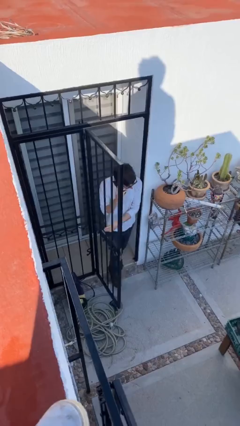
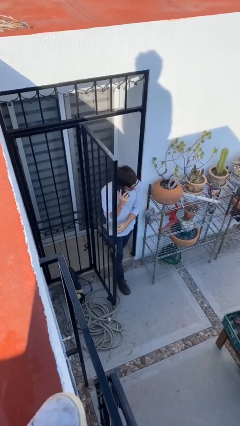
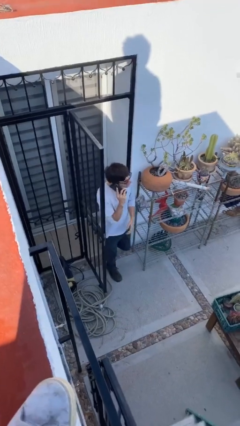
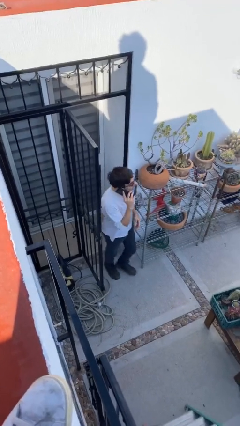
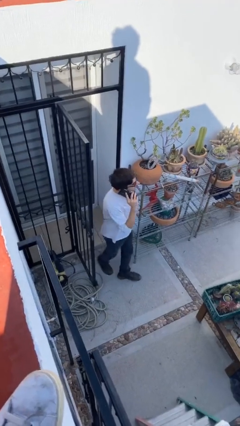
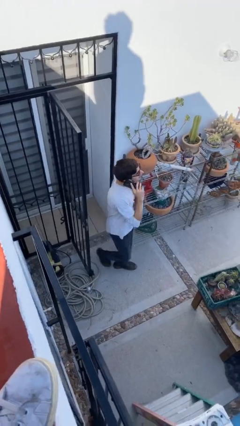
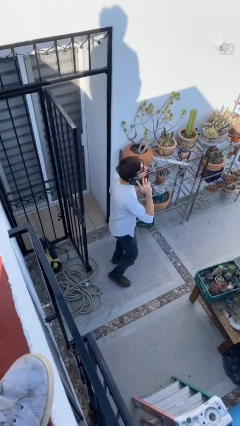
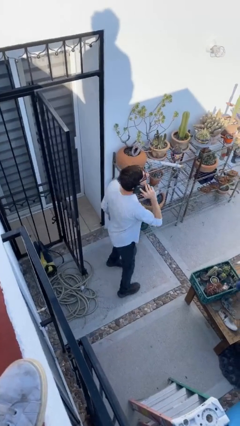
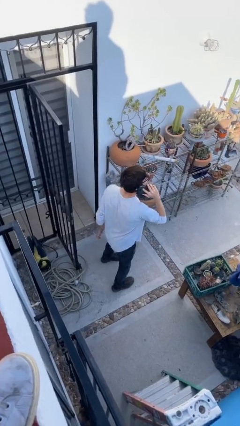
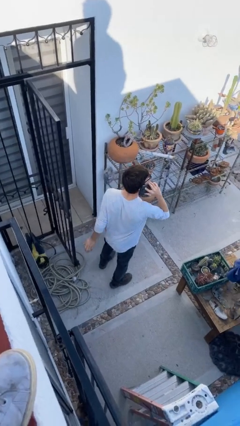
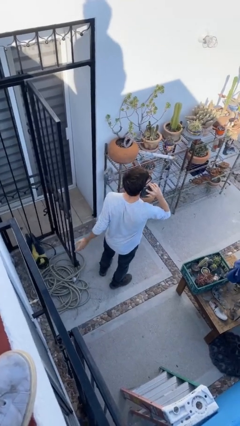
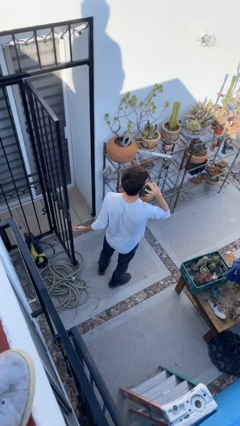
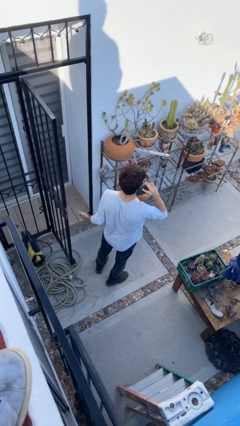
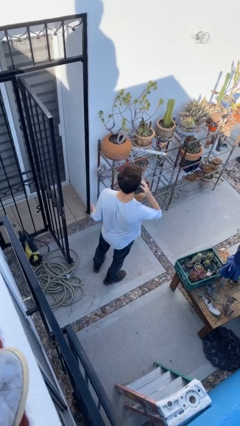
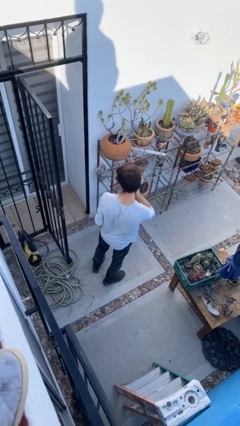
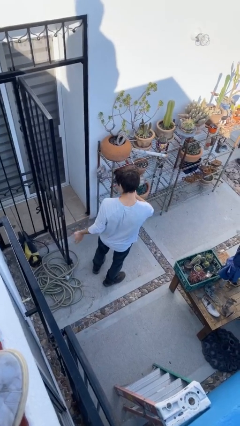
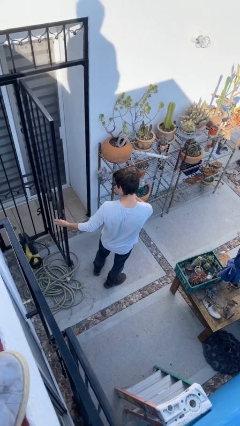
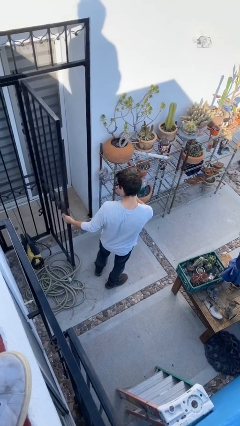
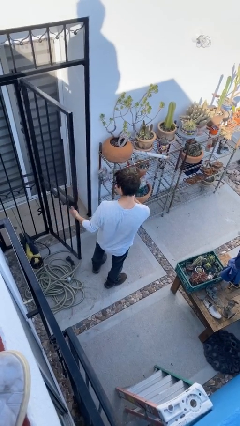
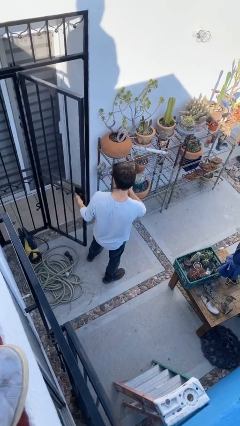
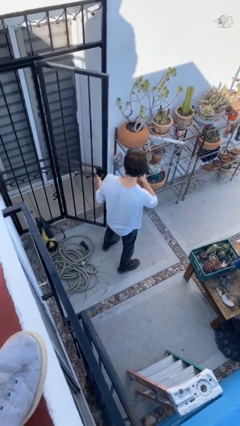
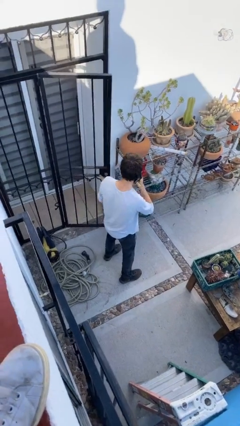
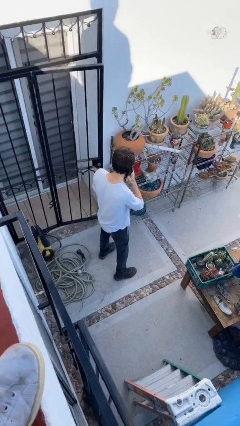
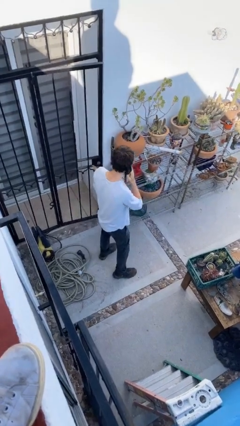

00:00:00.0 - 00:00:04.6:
person enters scene through structure

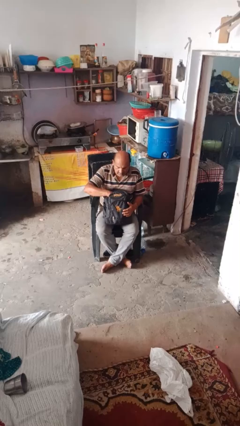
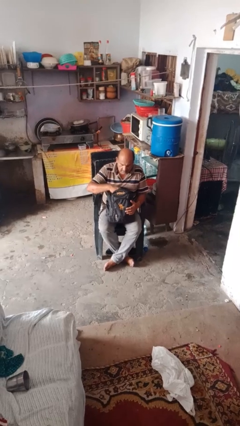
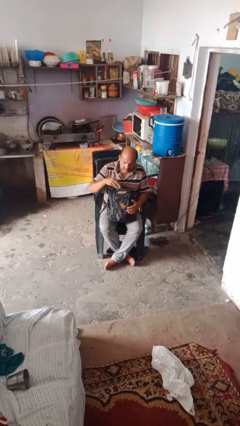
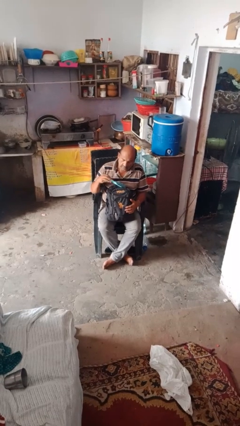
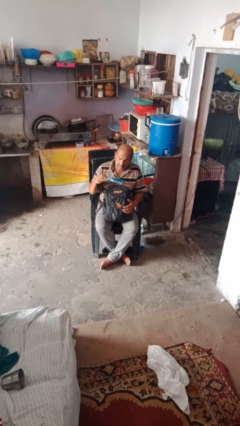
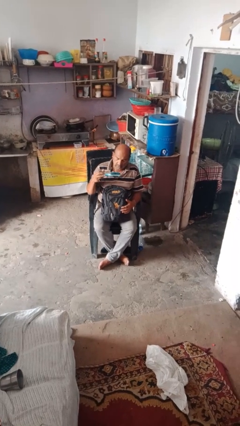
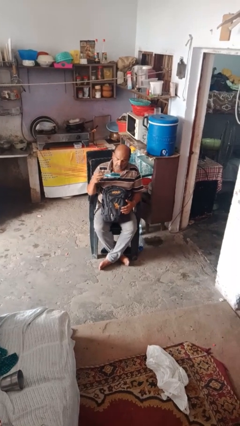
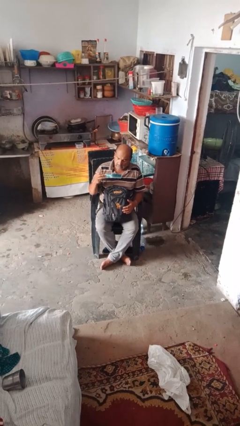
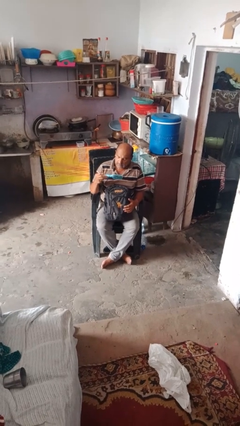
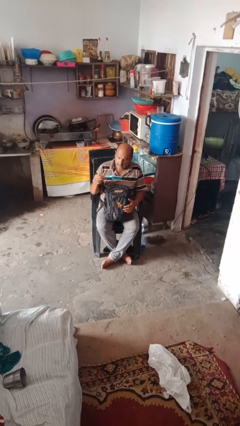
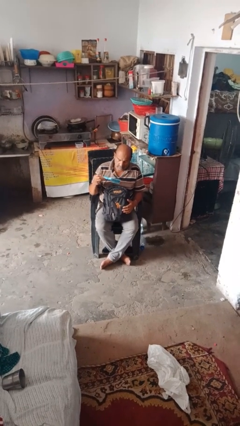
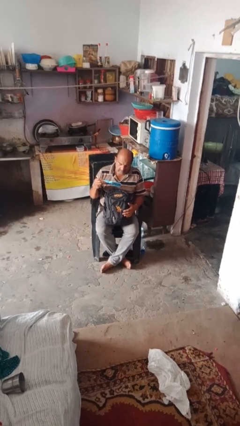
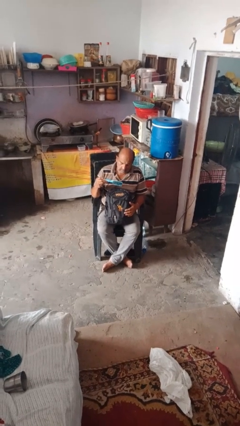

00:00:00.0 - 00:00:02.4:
person takes object from backpack

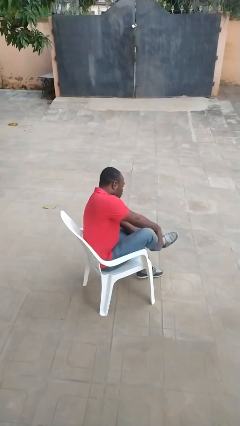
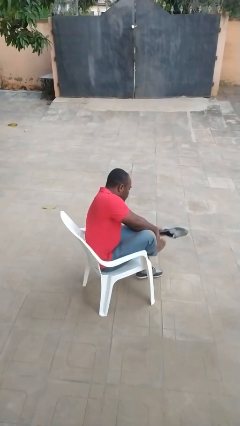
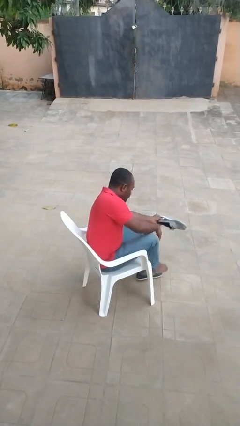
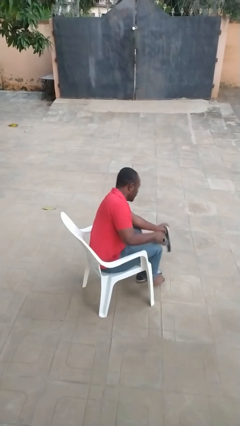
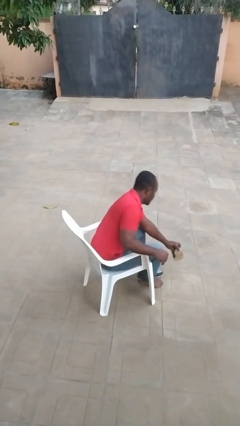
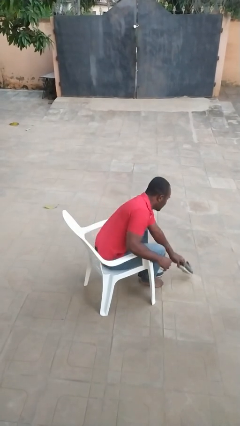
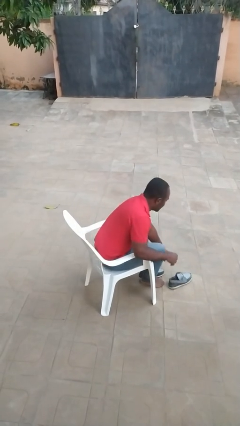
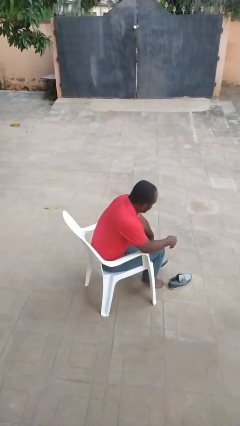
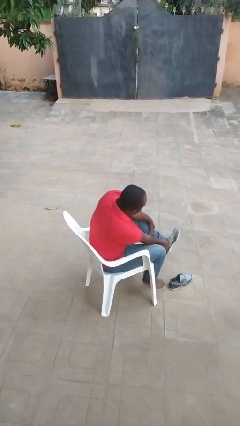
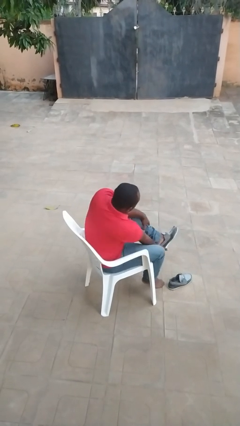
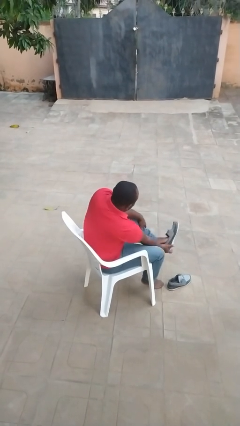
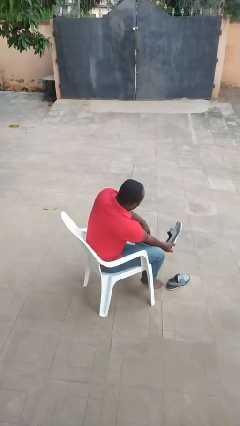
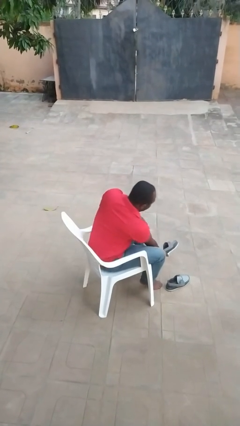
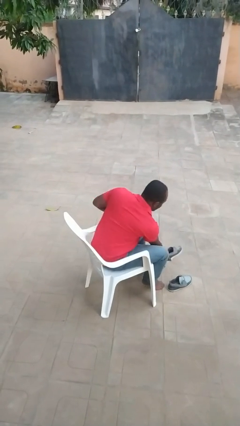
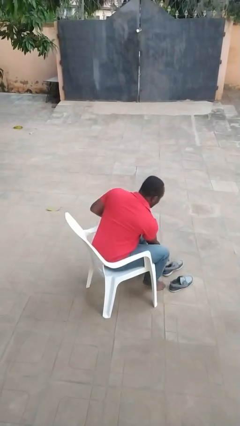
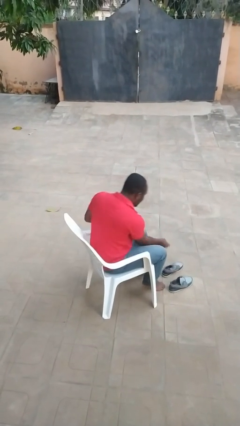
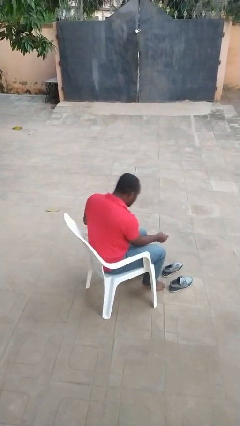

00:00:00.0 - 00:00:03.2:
person takes off shoes

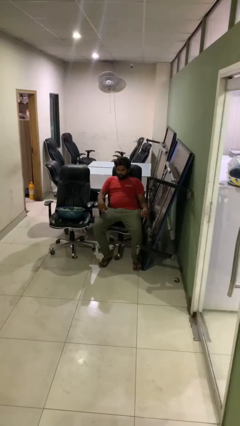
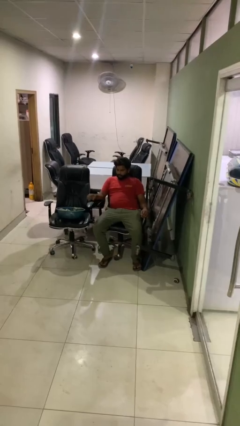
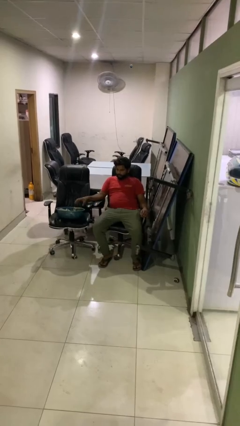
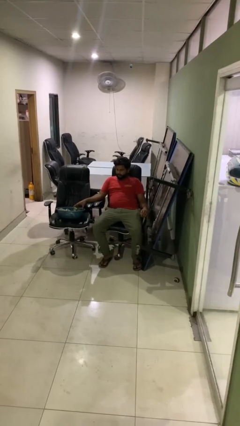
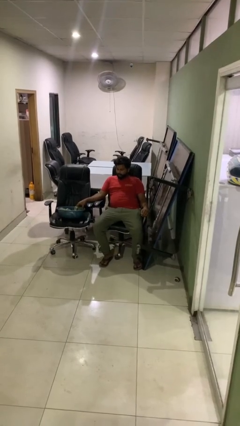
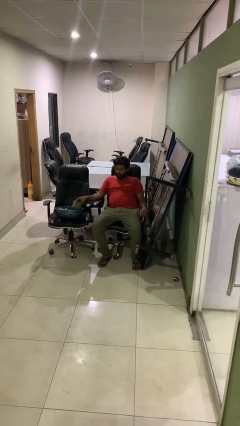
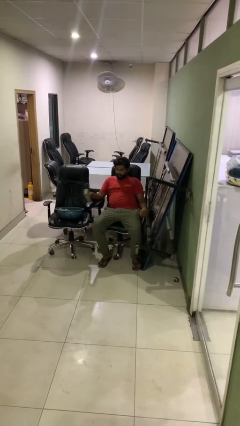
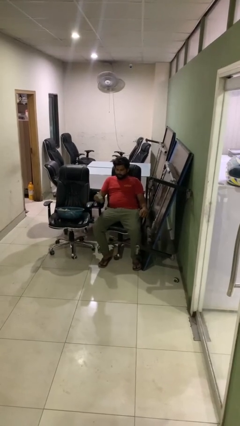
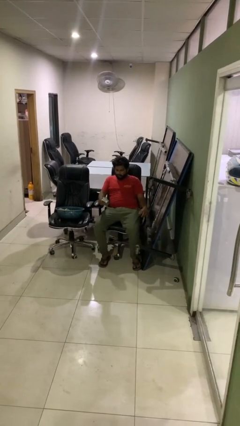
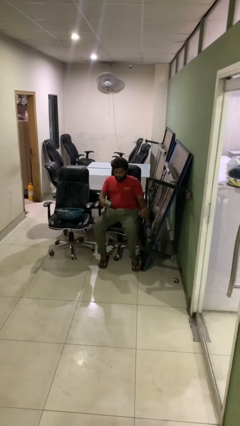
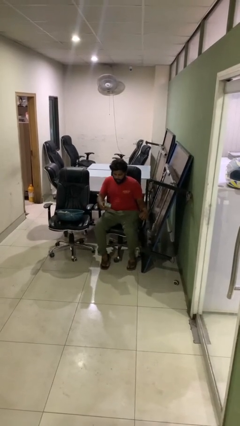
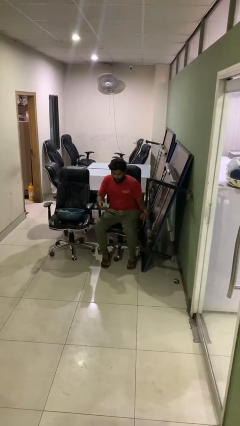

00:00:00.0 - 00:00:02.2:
person takes object from basket

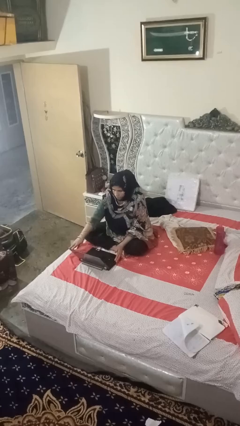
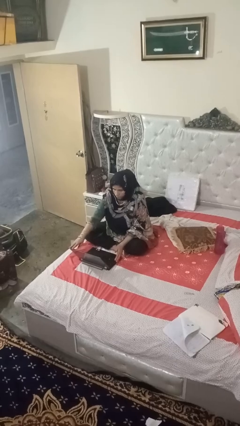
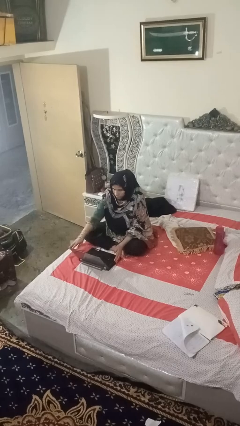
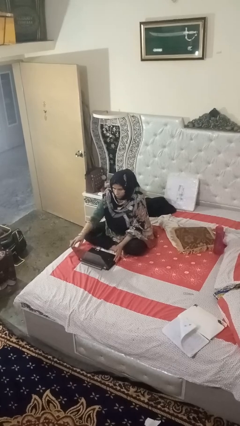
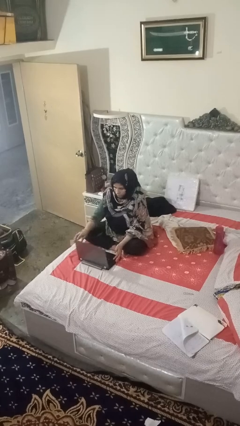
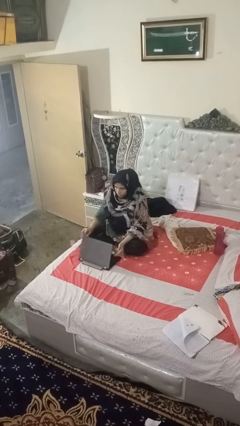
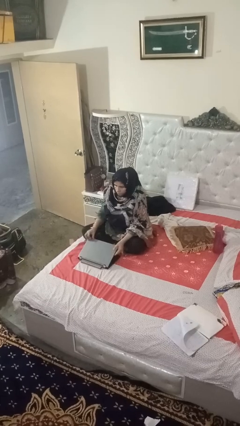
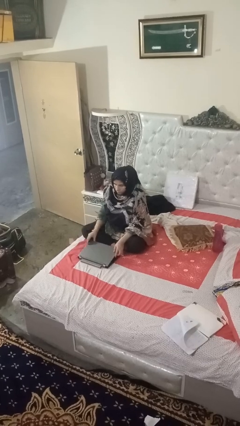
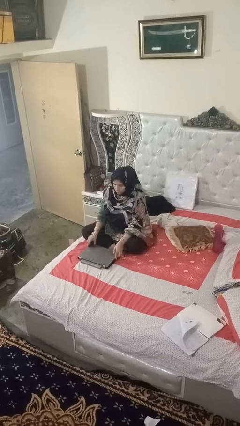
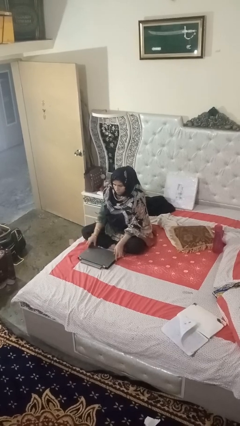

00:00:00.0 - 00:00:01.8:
person closes laptop

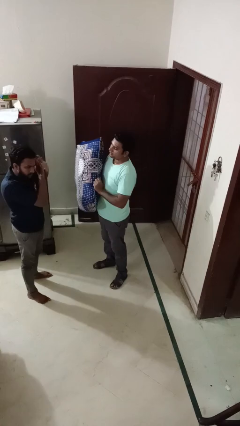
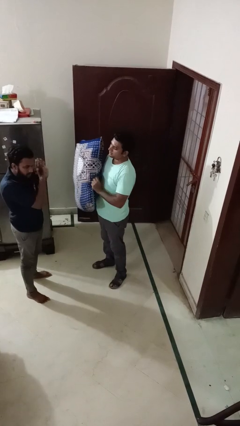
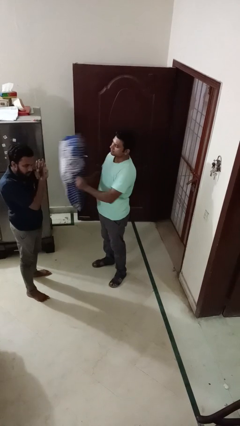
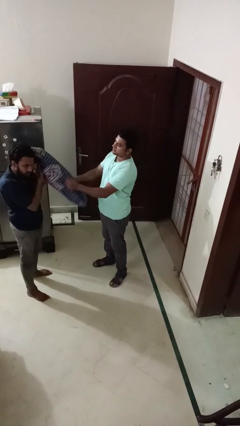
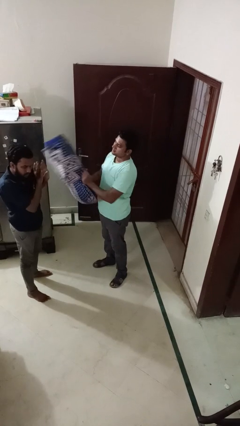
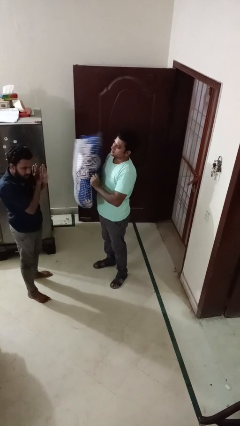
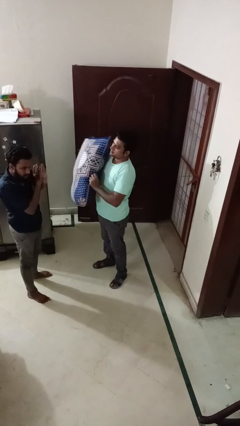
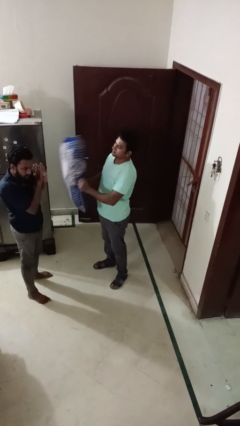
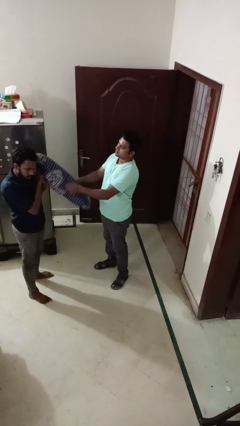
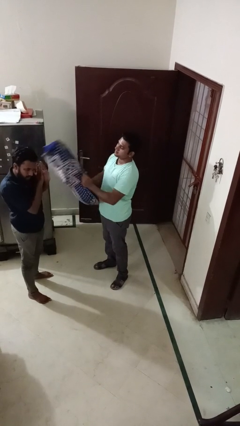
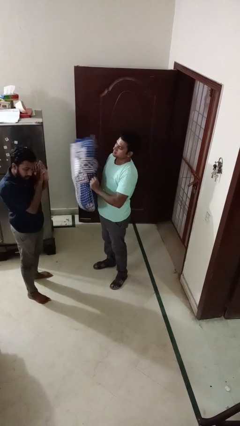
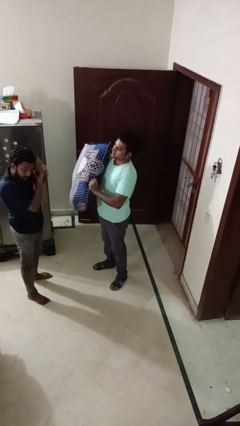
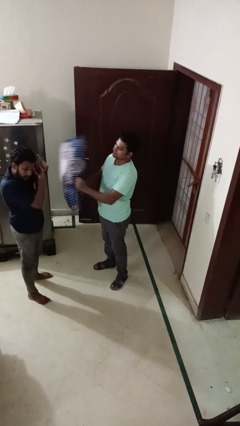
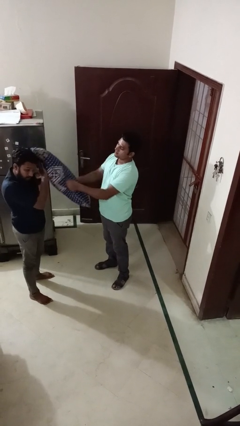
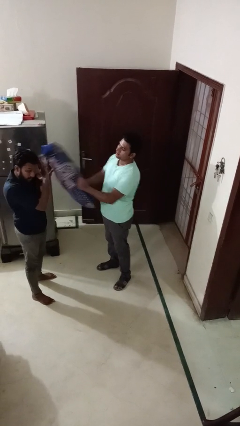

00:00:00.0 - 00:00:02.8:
person hits person with pillow

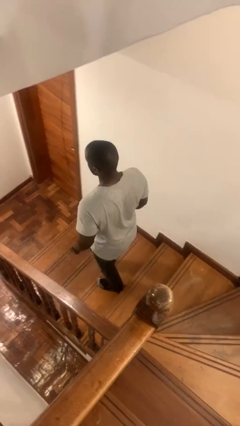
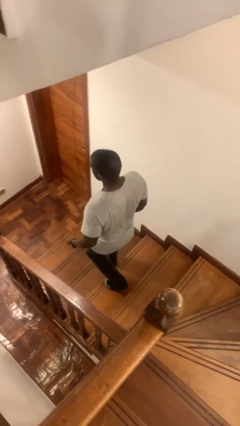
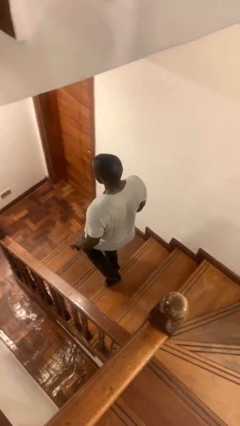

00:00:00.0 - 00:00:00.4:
person climbs down stairs
